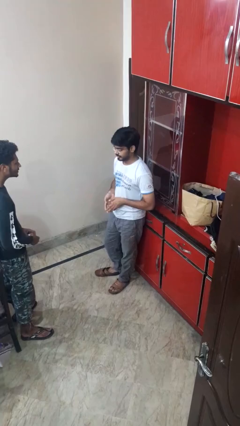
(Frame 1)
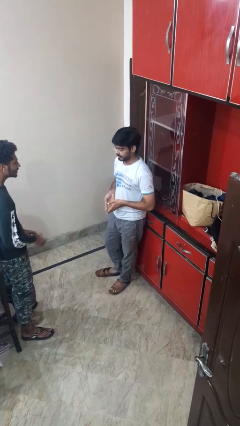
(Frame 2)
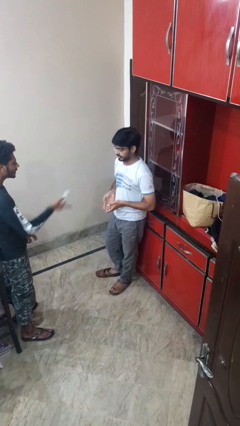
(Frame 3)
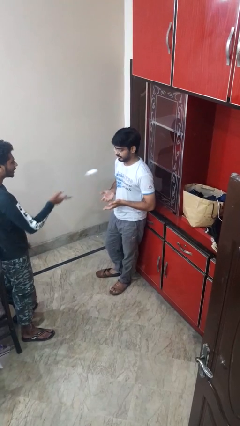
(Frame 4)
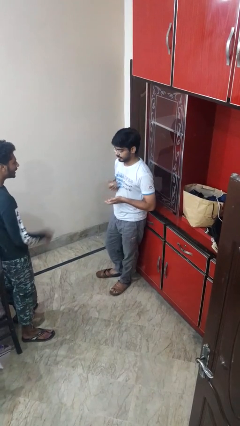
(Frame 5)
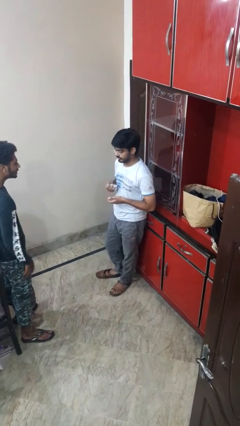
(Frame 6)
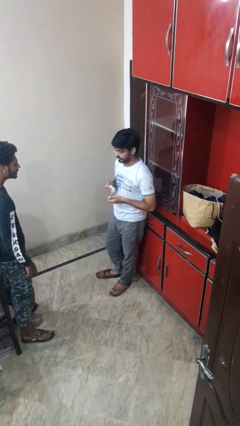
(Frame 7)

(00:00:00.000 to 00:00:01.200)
person catches object from person

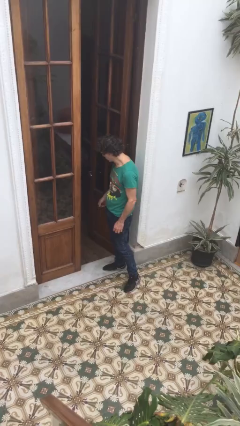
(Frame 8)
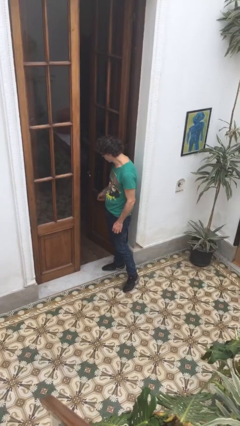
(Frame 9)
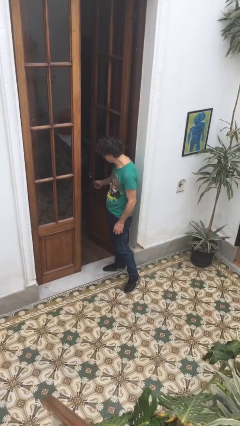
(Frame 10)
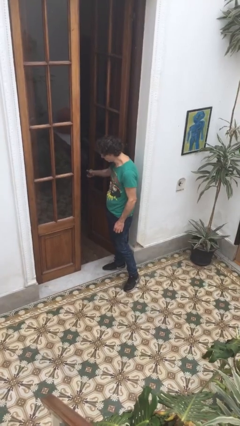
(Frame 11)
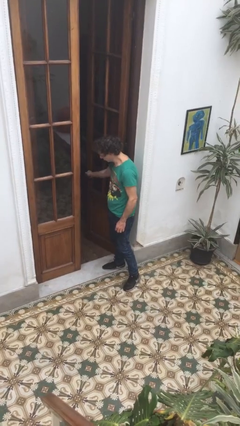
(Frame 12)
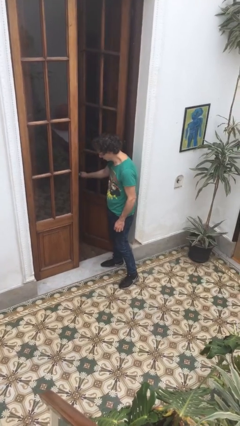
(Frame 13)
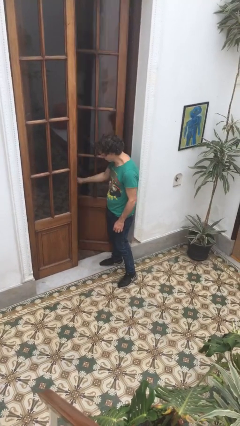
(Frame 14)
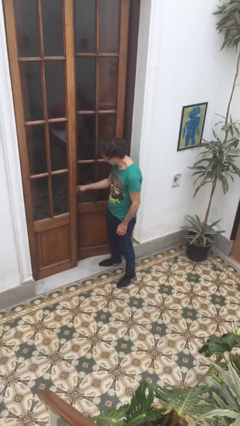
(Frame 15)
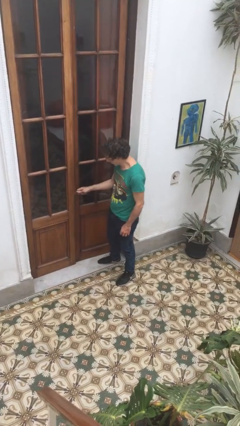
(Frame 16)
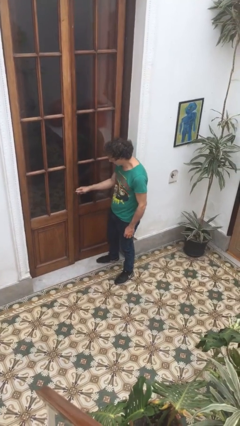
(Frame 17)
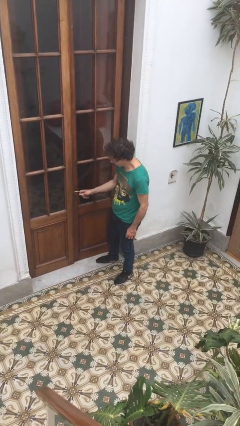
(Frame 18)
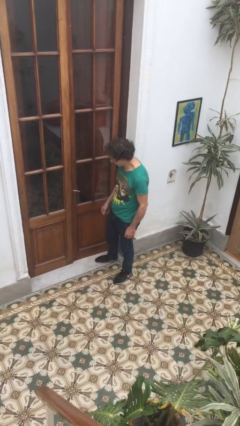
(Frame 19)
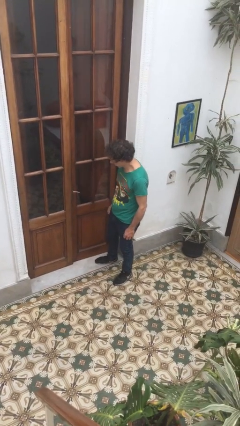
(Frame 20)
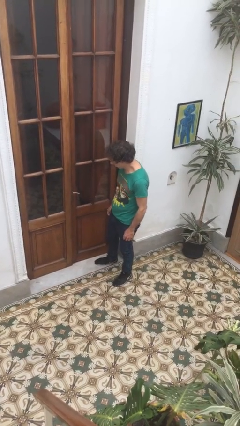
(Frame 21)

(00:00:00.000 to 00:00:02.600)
person closes facility door

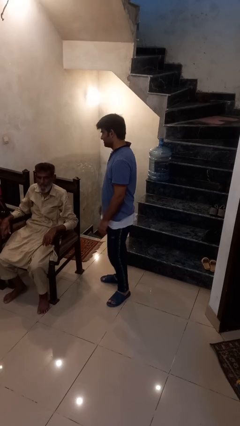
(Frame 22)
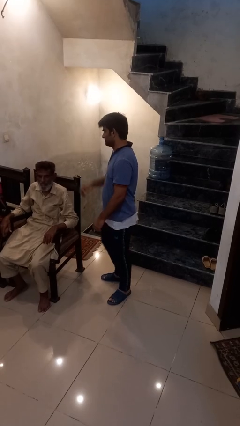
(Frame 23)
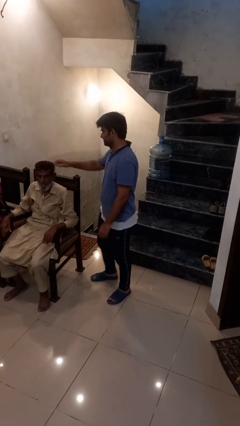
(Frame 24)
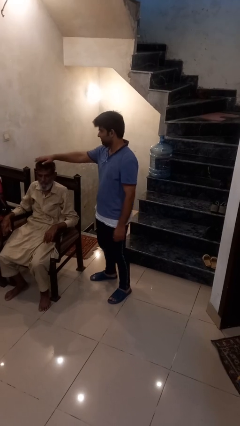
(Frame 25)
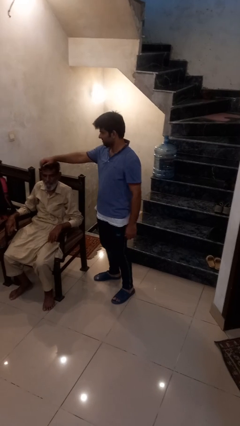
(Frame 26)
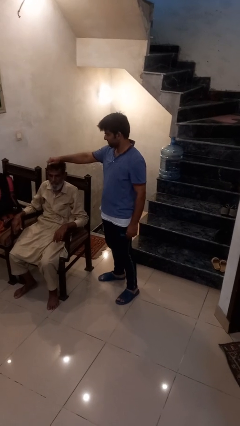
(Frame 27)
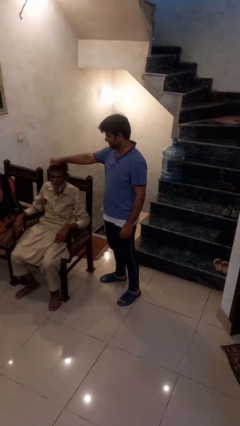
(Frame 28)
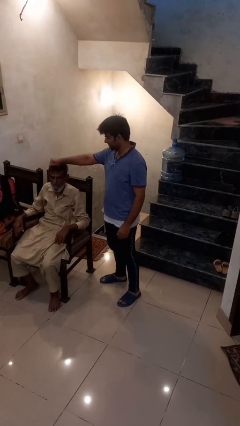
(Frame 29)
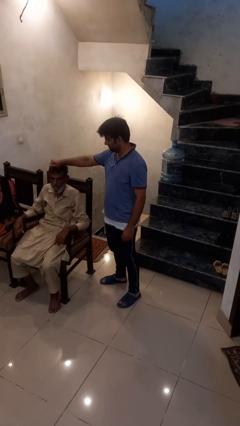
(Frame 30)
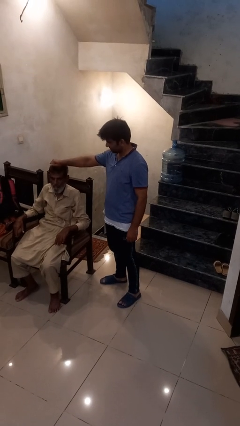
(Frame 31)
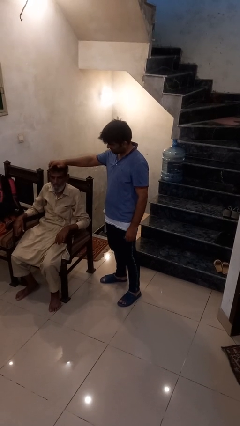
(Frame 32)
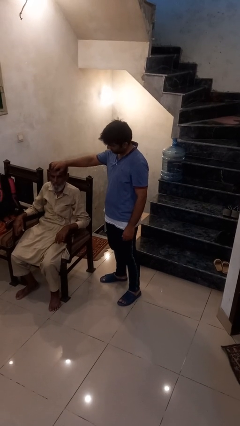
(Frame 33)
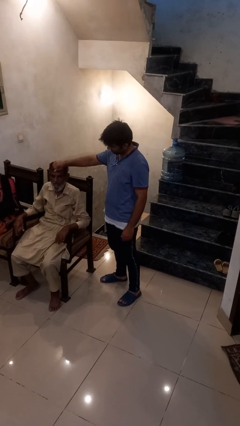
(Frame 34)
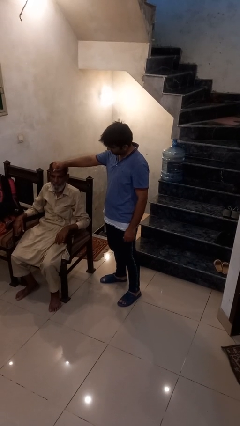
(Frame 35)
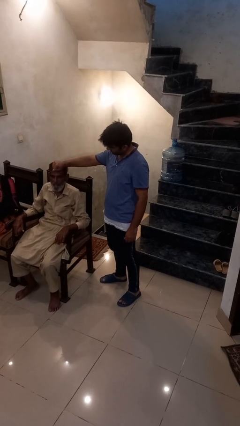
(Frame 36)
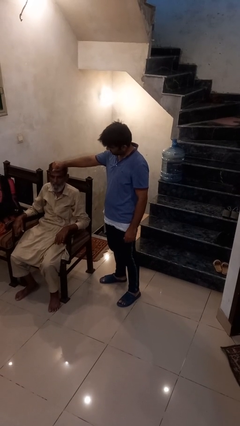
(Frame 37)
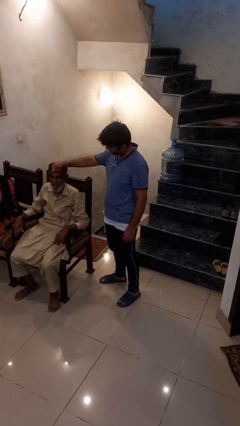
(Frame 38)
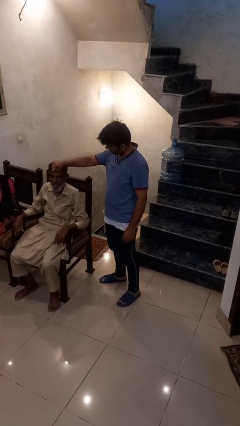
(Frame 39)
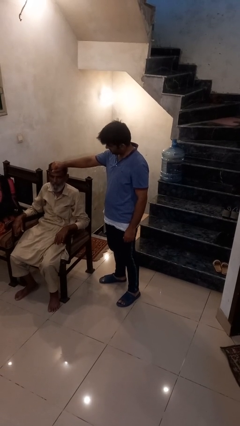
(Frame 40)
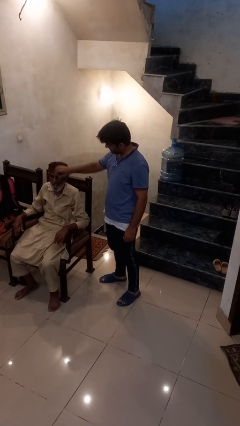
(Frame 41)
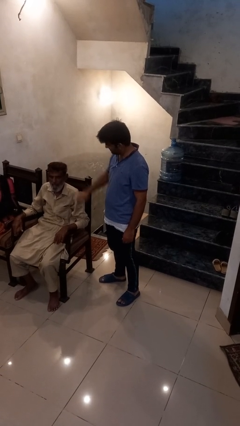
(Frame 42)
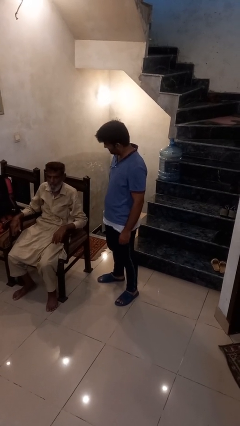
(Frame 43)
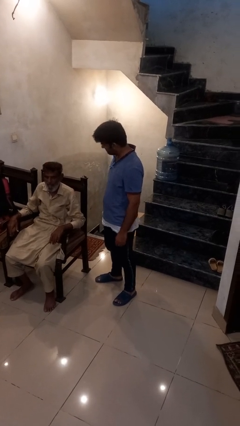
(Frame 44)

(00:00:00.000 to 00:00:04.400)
person grabs person by hair

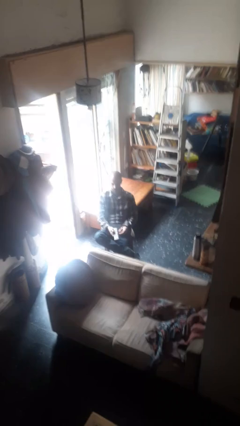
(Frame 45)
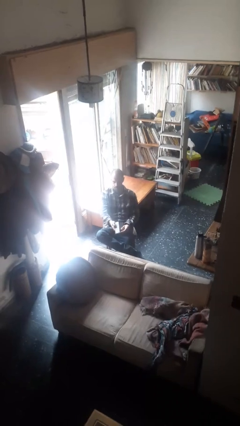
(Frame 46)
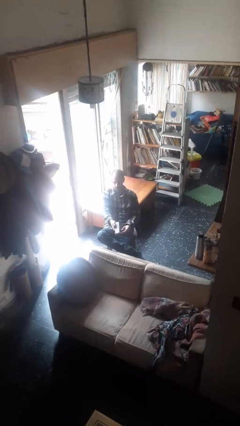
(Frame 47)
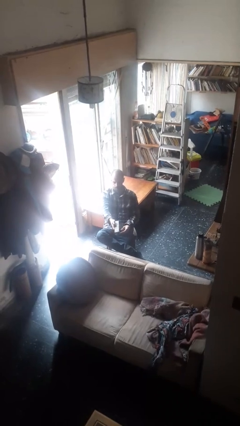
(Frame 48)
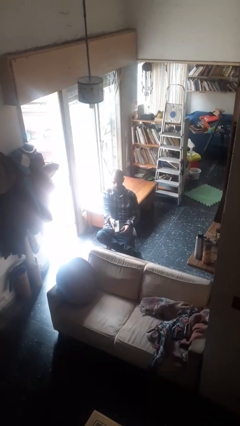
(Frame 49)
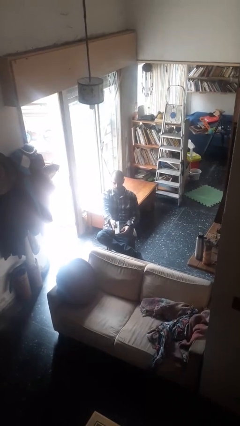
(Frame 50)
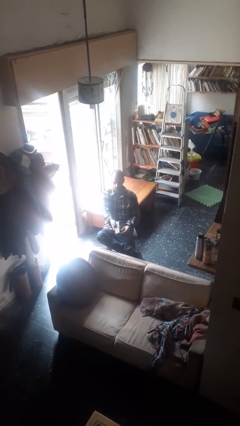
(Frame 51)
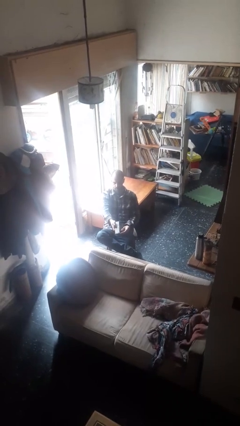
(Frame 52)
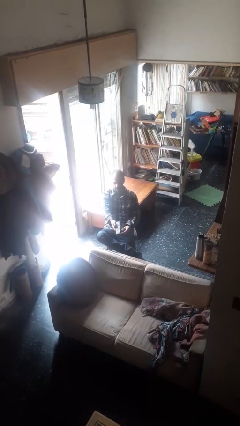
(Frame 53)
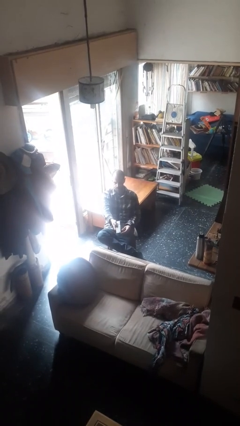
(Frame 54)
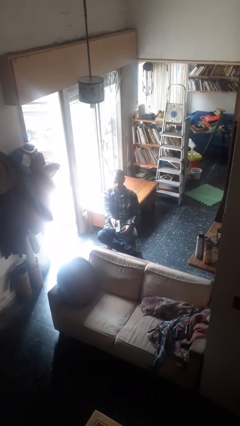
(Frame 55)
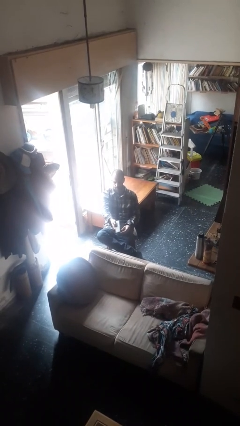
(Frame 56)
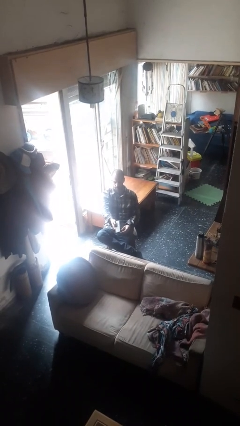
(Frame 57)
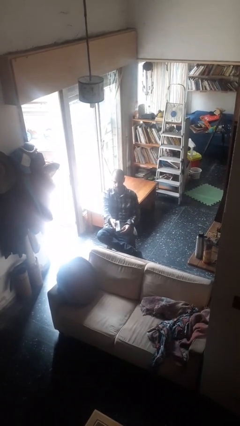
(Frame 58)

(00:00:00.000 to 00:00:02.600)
person uses television remote

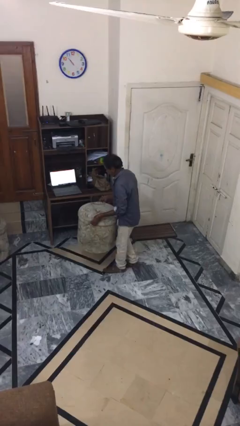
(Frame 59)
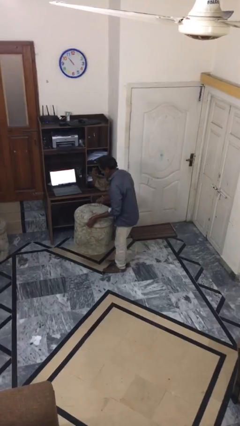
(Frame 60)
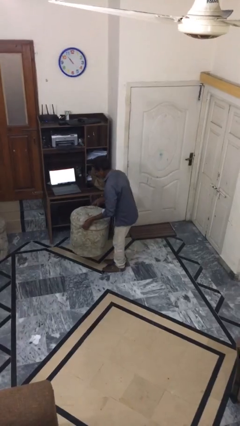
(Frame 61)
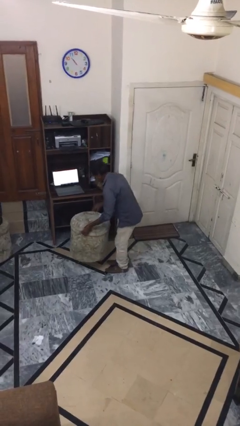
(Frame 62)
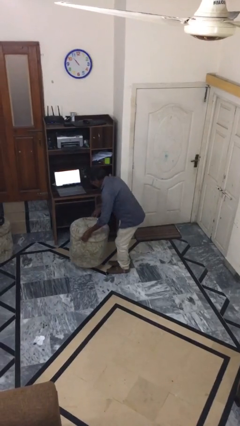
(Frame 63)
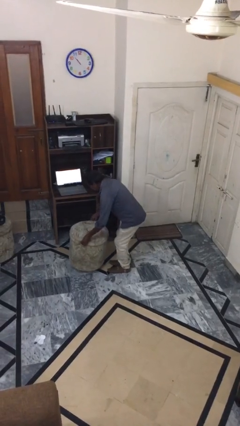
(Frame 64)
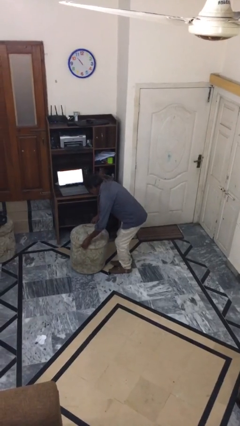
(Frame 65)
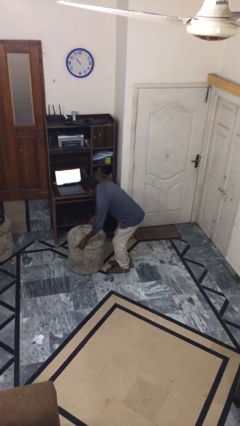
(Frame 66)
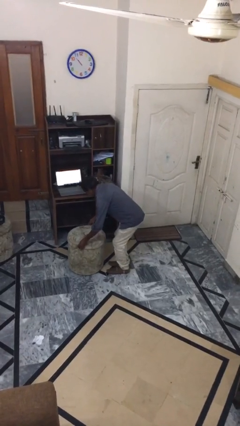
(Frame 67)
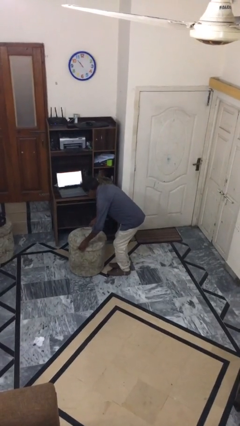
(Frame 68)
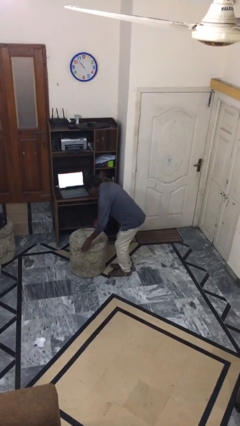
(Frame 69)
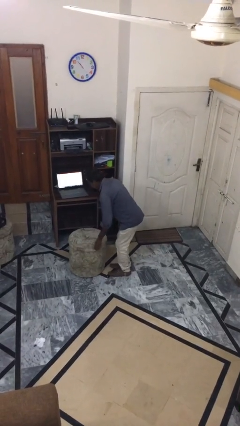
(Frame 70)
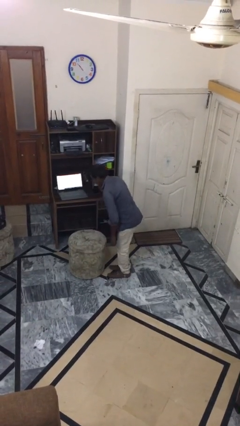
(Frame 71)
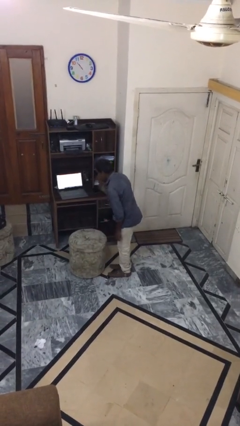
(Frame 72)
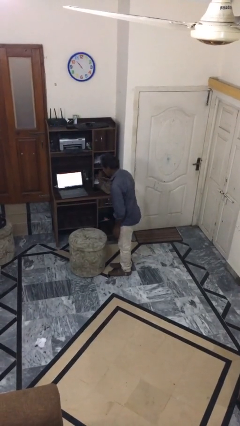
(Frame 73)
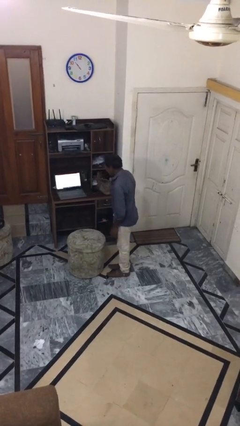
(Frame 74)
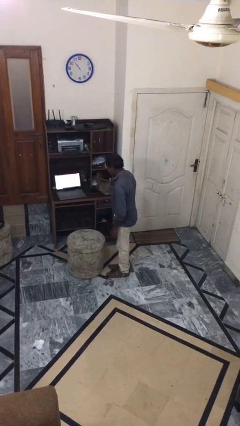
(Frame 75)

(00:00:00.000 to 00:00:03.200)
person puts down object on floor

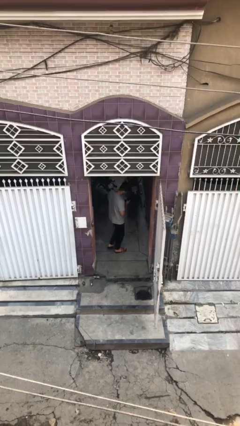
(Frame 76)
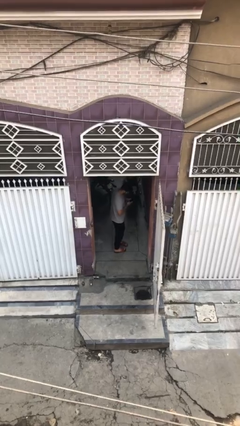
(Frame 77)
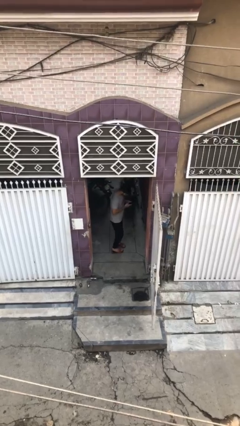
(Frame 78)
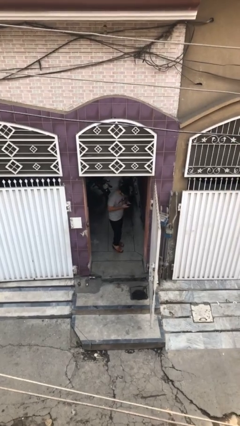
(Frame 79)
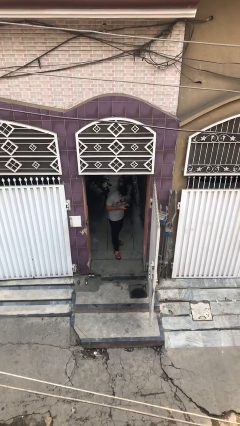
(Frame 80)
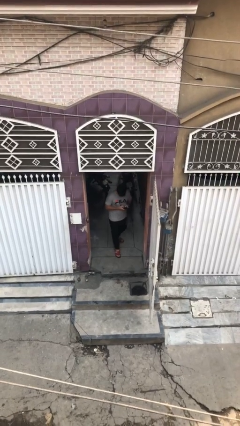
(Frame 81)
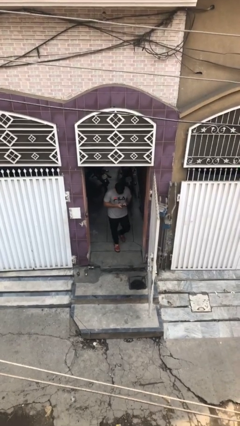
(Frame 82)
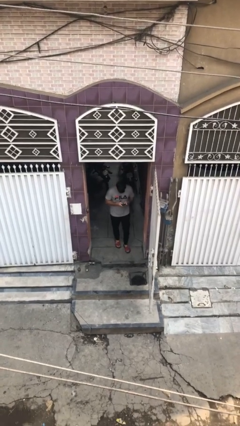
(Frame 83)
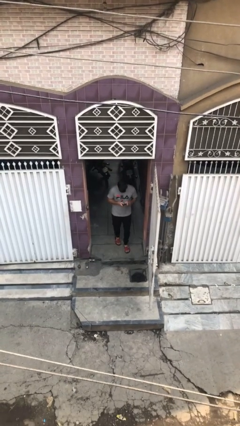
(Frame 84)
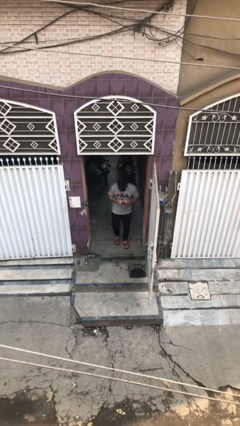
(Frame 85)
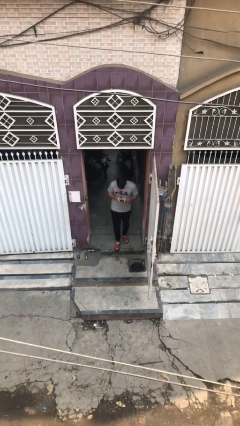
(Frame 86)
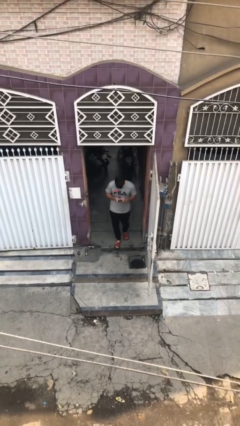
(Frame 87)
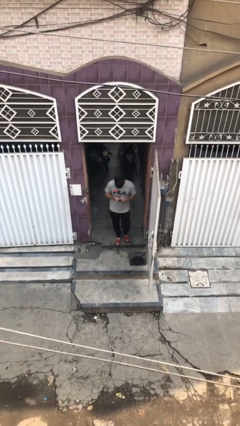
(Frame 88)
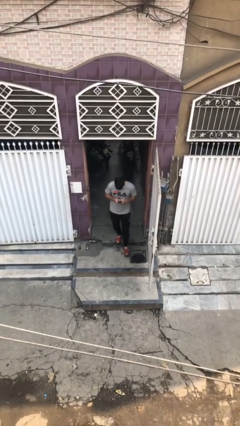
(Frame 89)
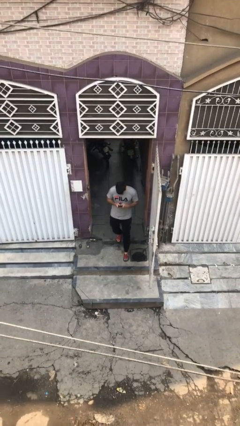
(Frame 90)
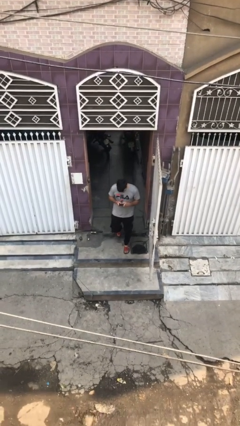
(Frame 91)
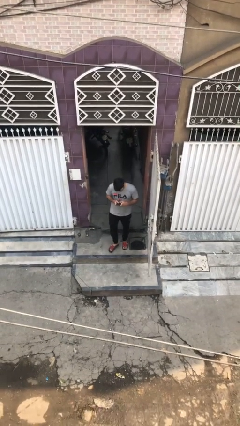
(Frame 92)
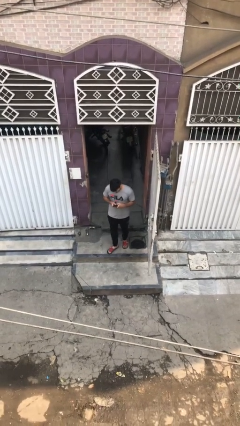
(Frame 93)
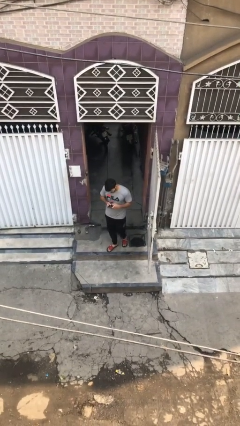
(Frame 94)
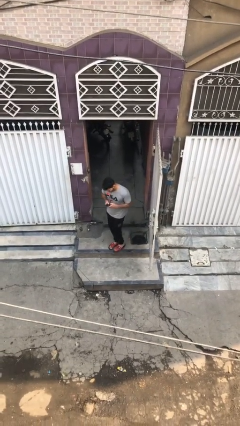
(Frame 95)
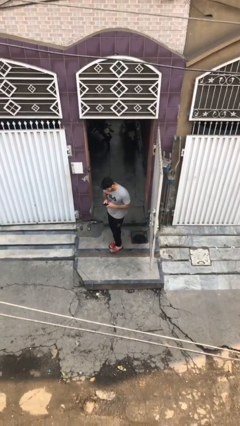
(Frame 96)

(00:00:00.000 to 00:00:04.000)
person enters scene through structure
